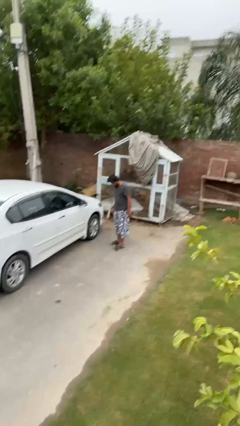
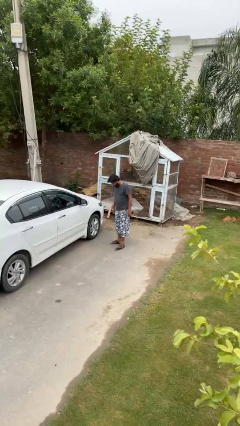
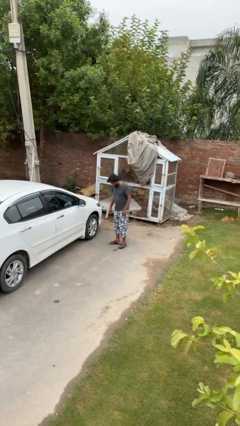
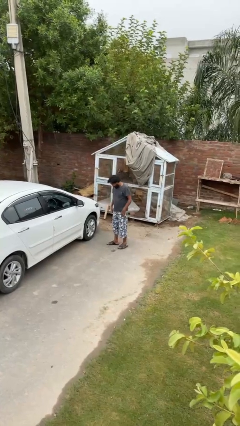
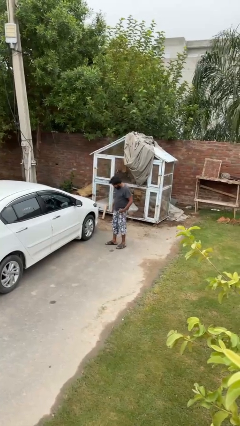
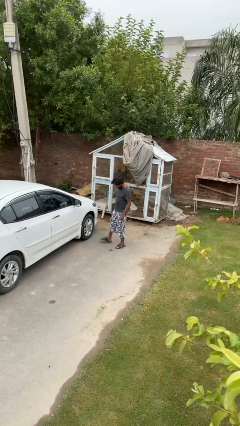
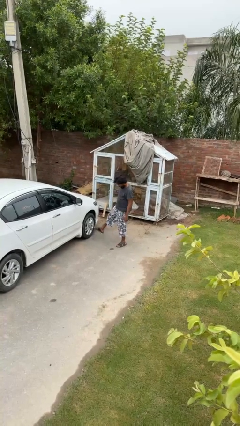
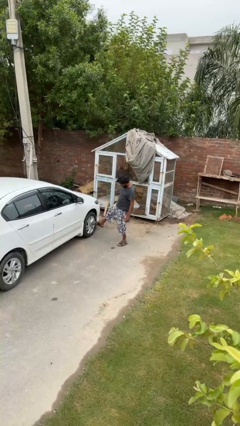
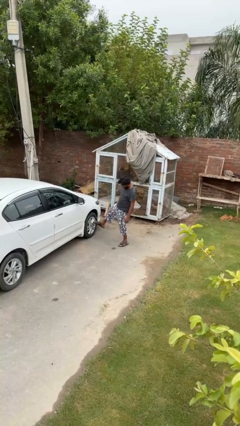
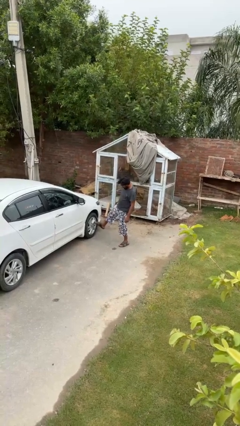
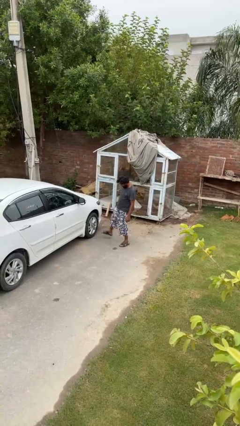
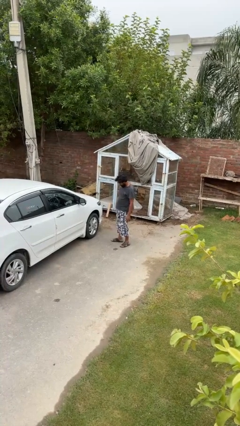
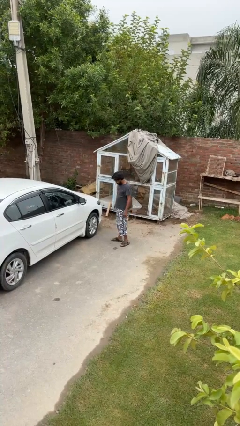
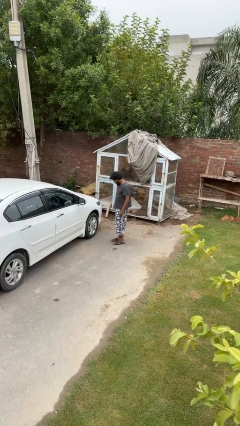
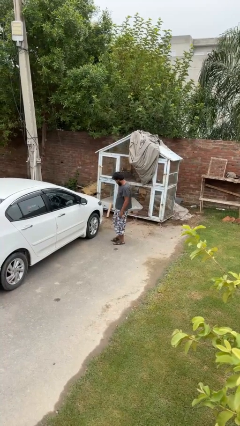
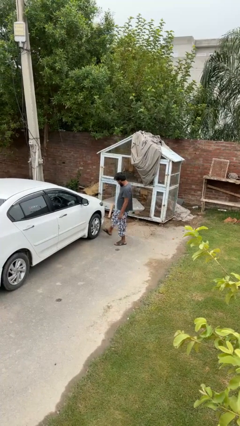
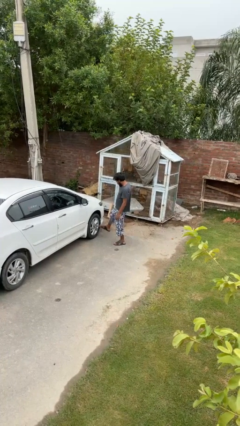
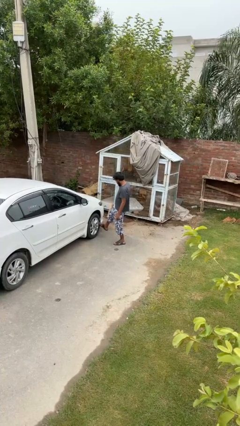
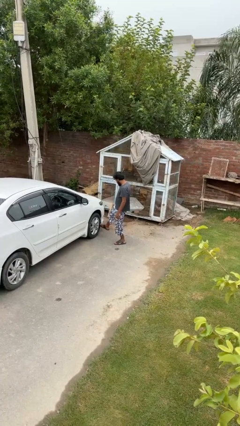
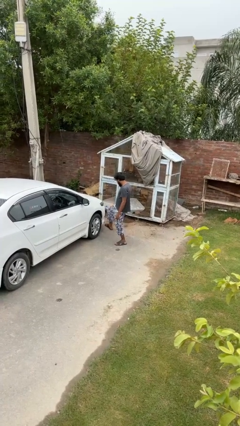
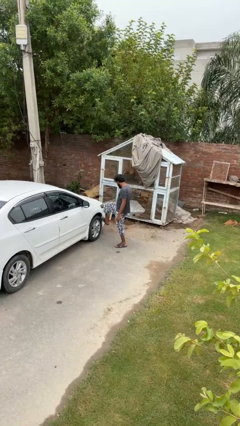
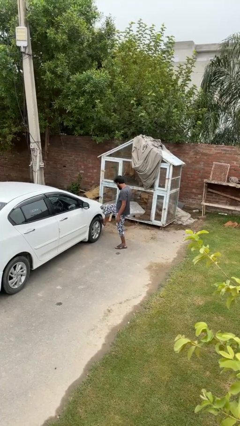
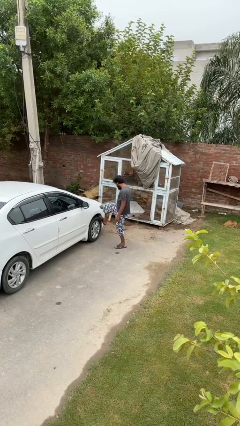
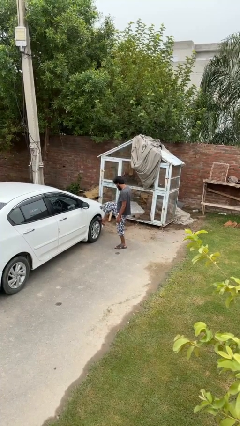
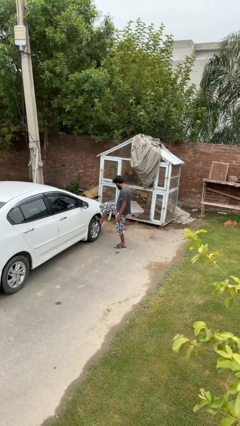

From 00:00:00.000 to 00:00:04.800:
person kicks car tires

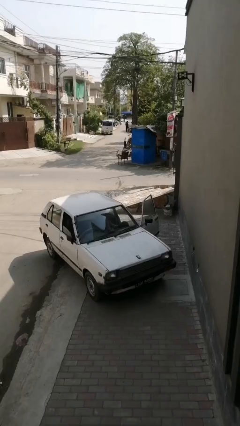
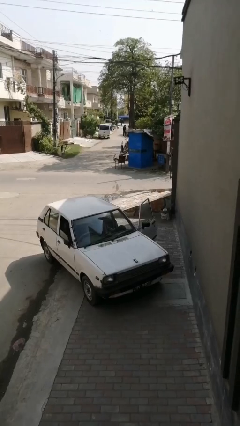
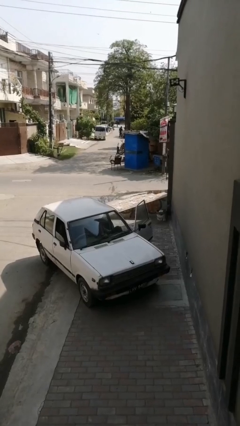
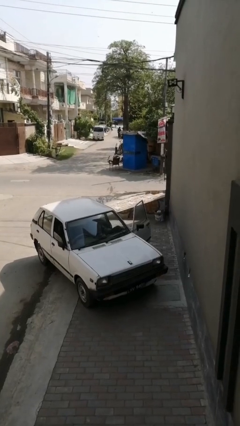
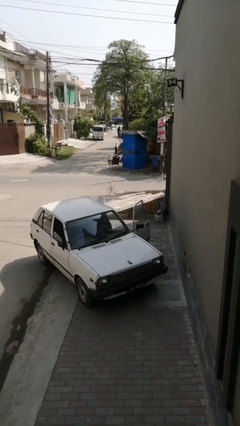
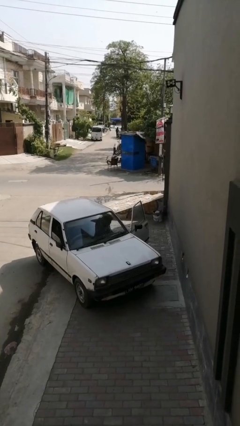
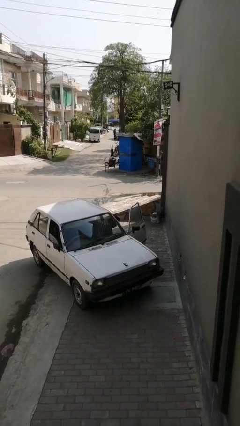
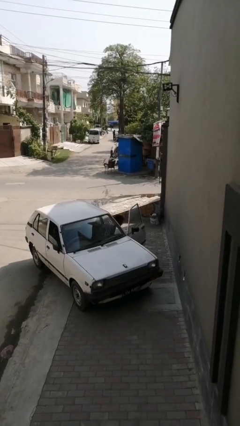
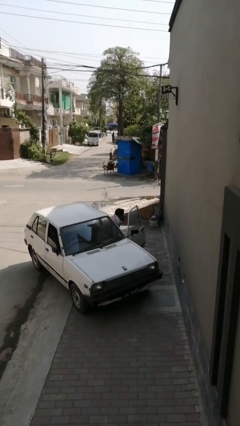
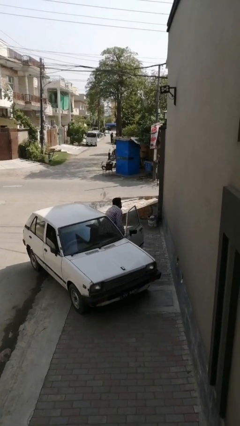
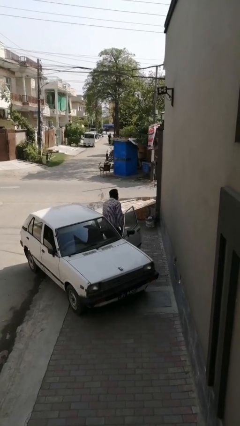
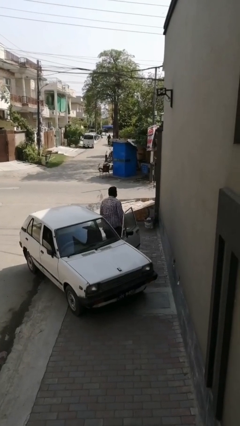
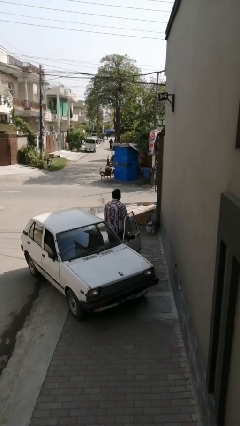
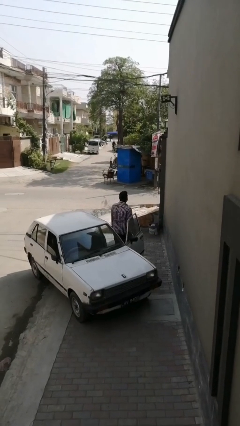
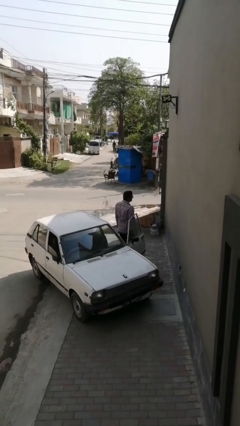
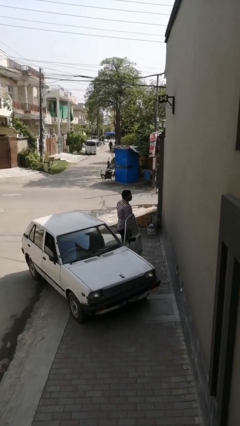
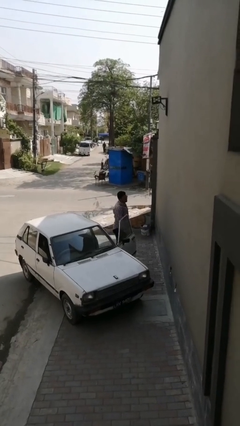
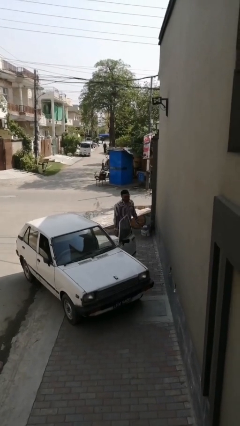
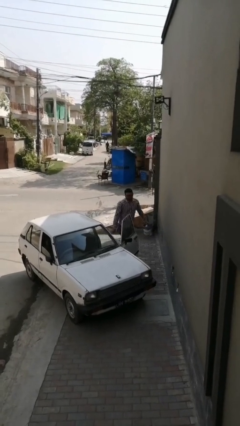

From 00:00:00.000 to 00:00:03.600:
person exits car

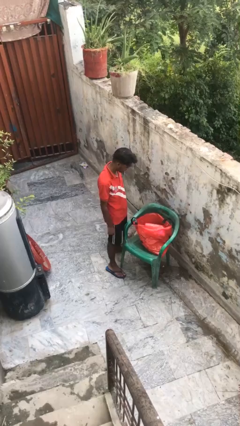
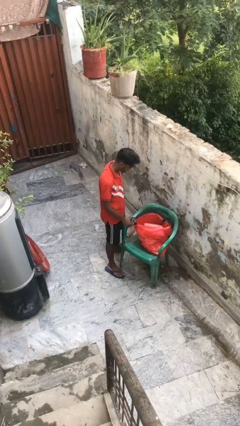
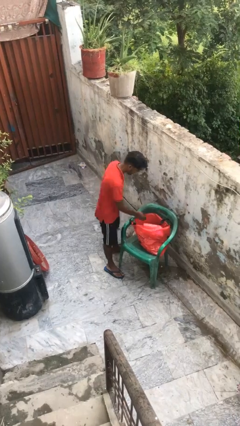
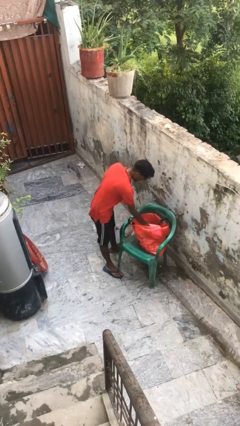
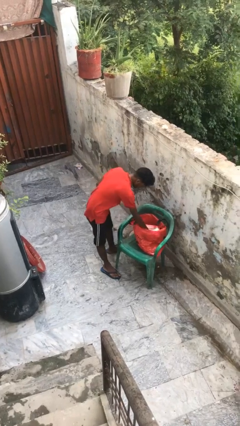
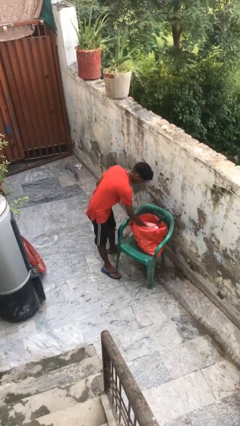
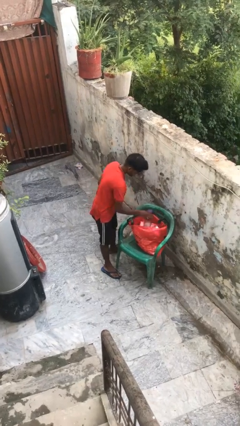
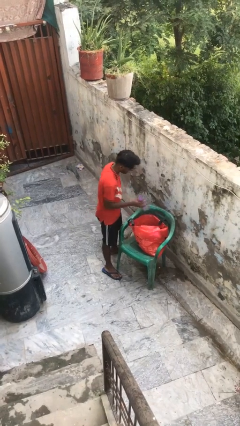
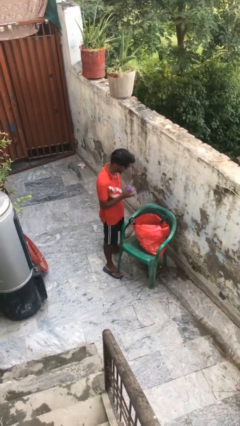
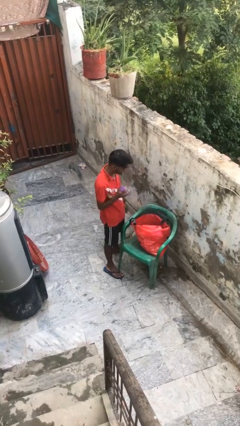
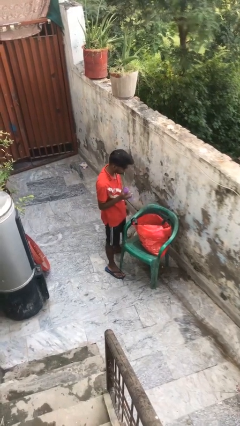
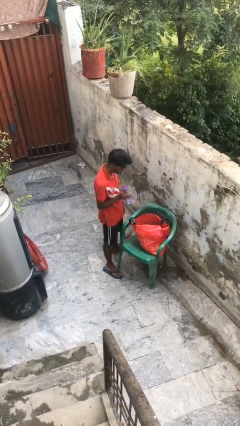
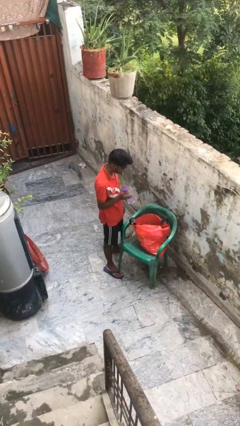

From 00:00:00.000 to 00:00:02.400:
person takes object from bag

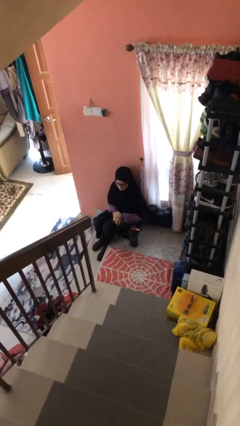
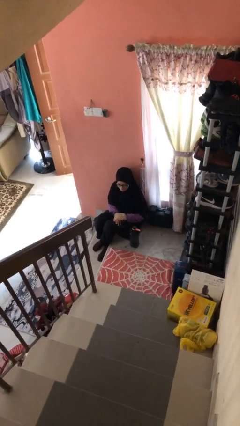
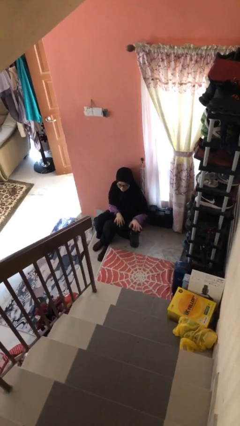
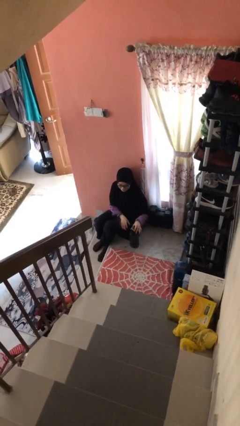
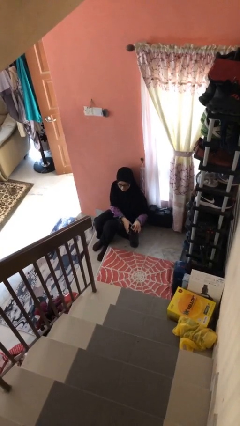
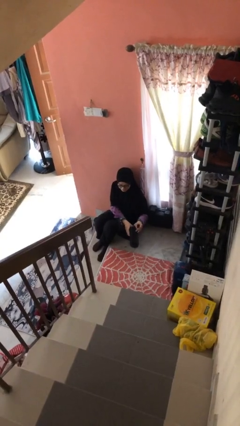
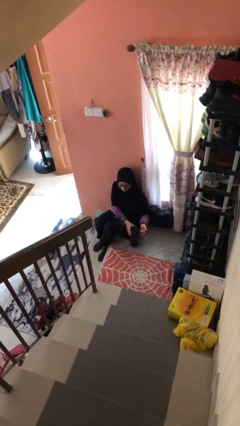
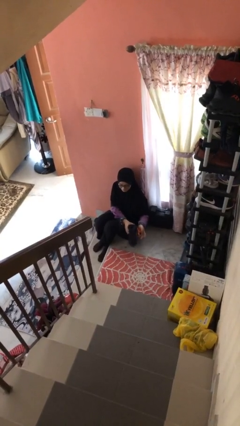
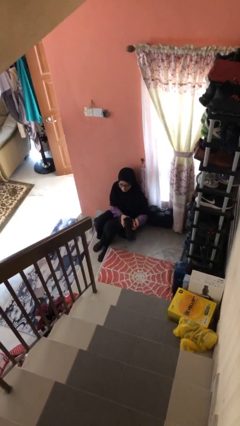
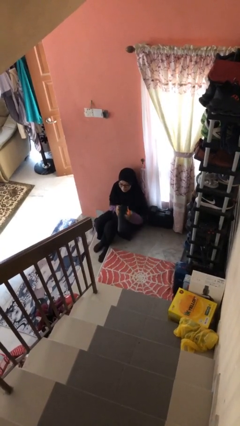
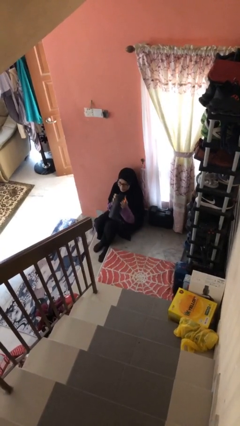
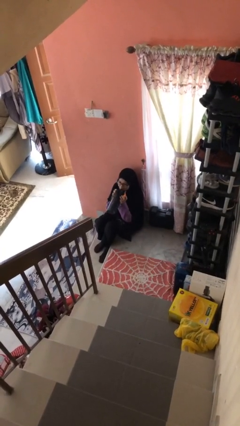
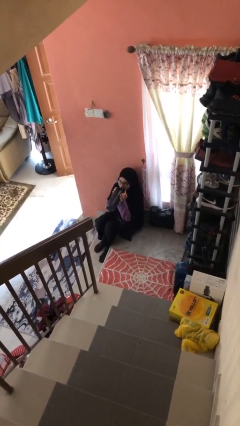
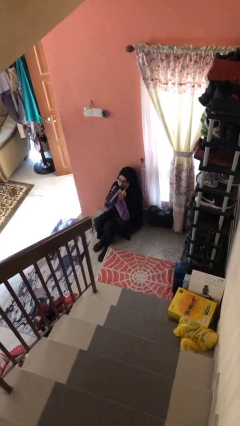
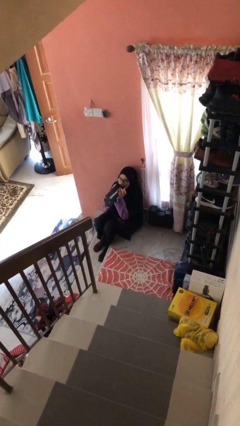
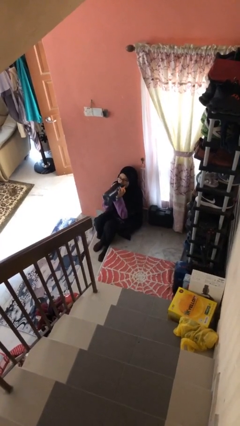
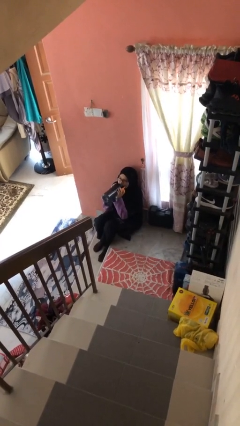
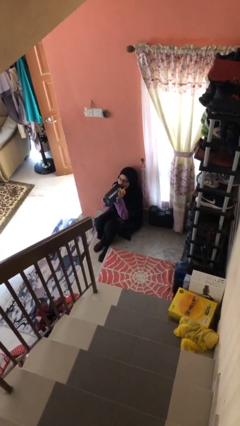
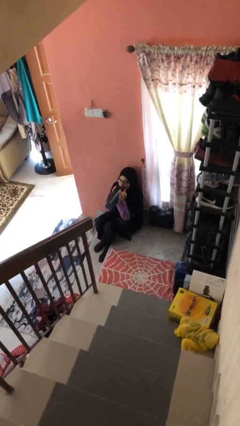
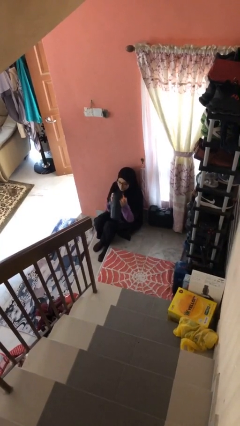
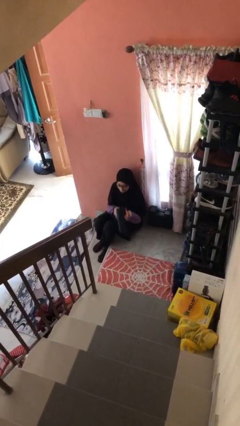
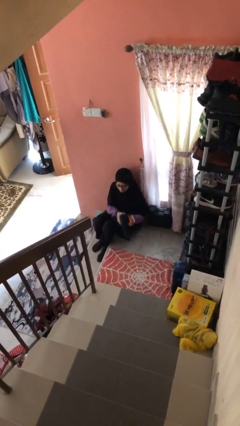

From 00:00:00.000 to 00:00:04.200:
person drinks from bottle

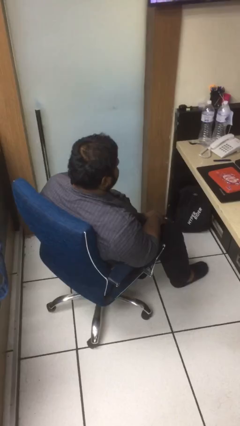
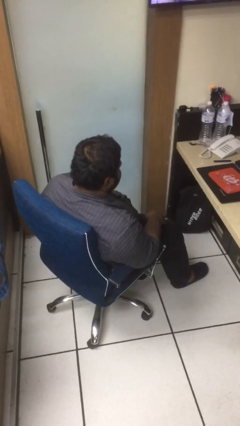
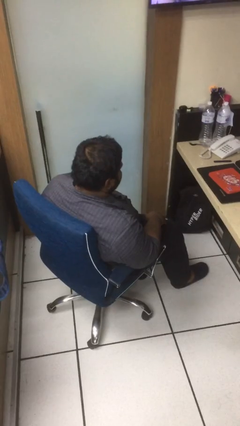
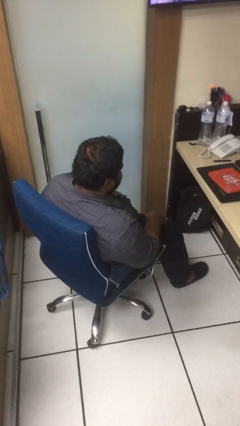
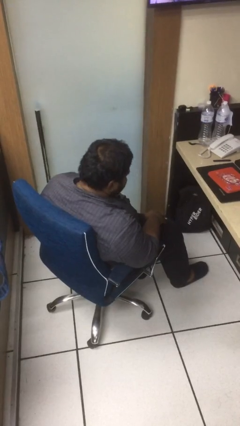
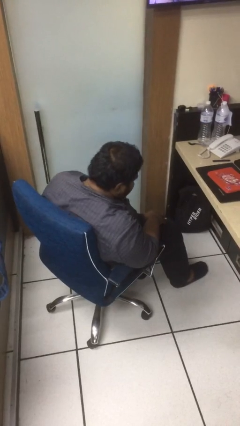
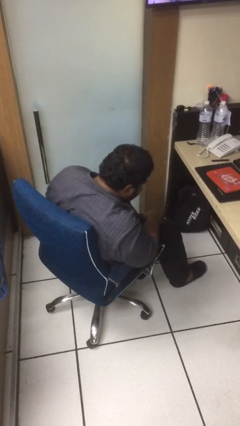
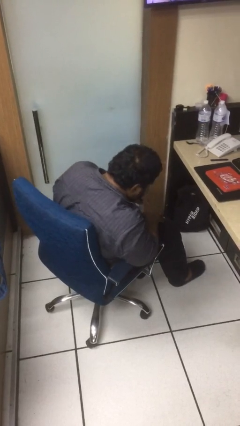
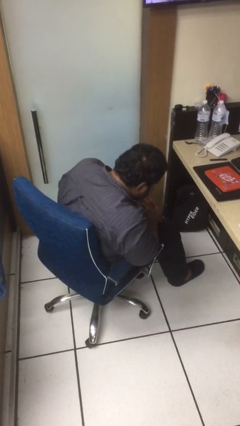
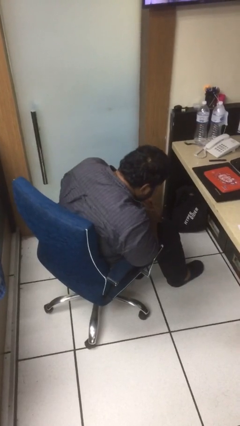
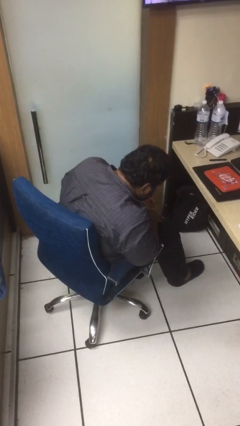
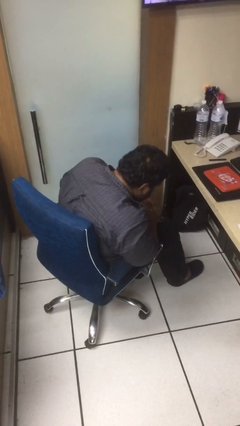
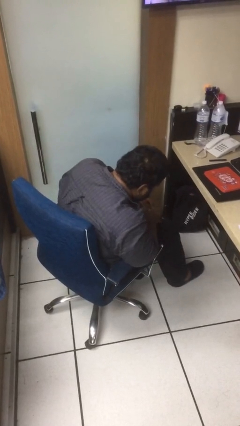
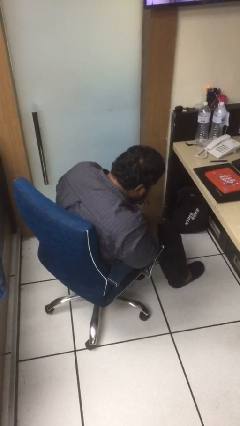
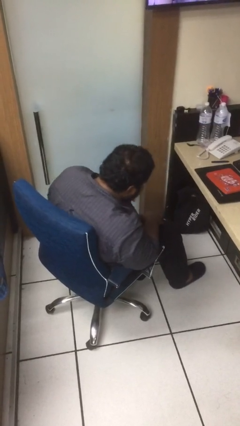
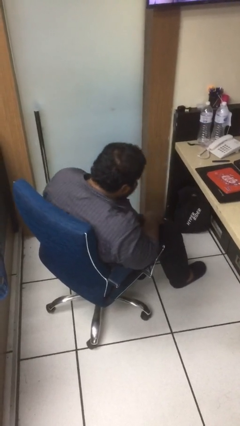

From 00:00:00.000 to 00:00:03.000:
person looks at hands in lap
